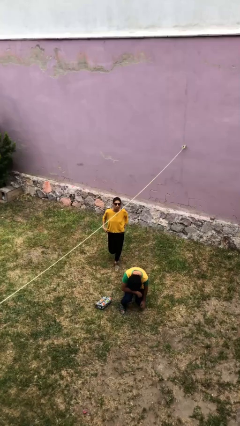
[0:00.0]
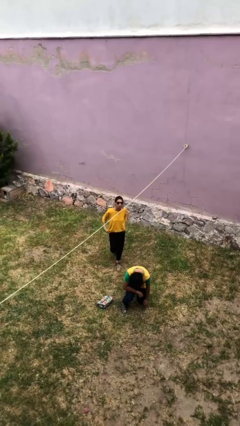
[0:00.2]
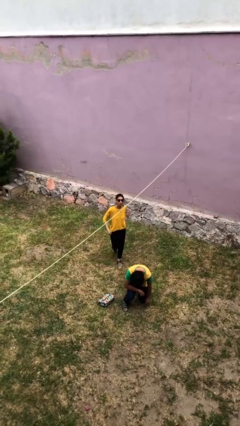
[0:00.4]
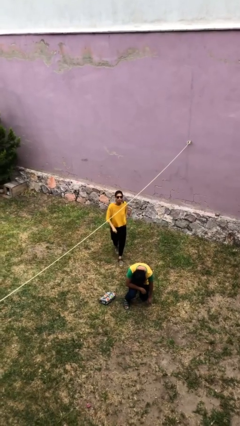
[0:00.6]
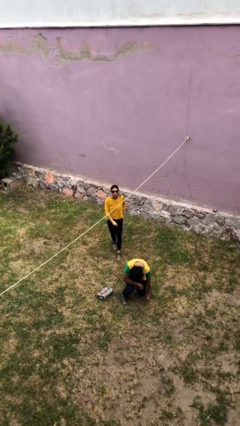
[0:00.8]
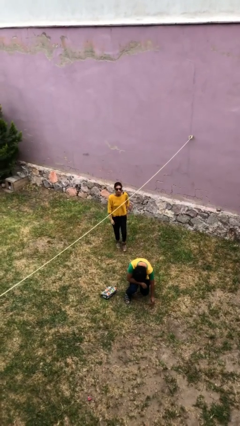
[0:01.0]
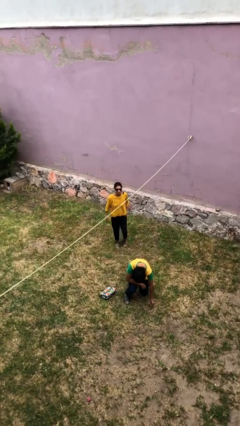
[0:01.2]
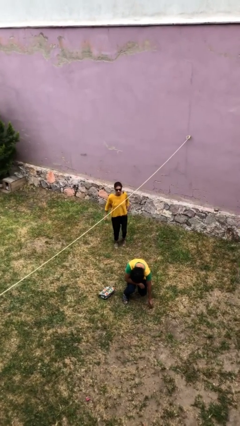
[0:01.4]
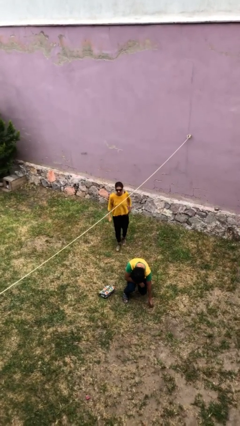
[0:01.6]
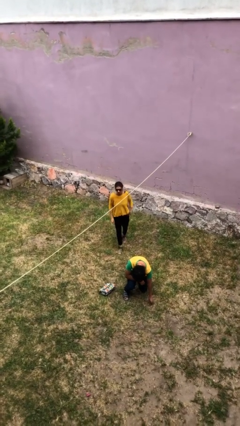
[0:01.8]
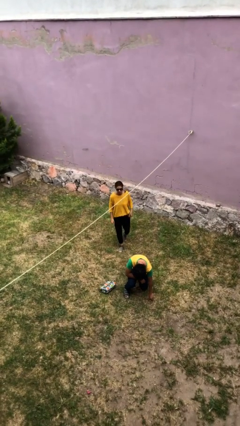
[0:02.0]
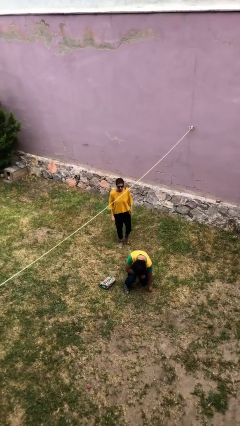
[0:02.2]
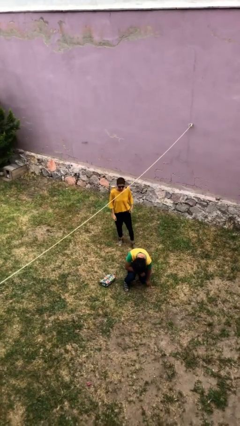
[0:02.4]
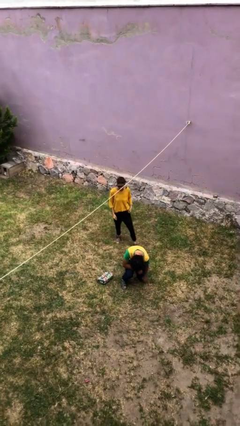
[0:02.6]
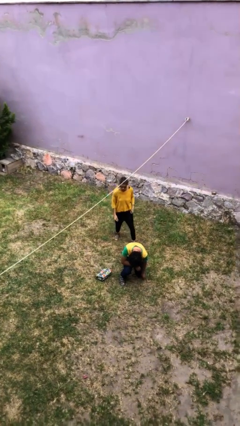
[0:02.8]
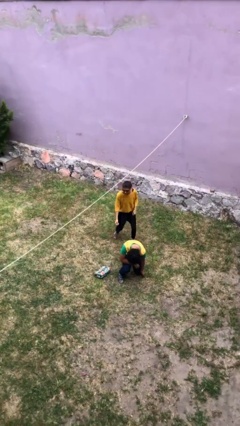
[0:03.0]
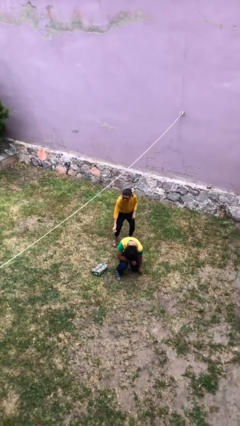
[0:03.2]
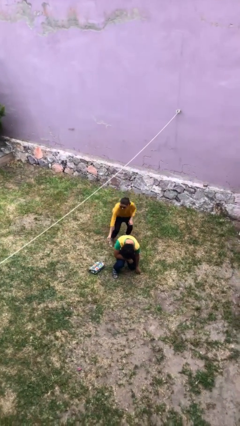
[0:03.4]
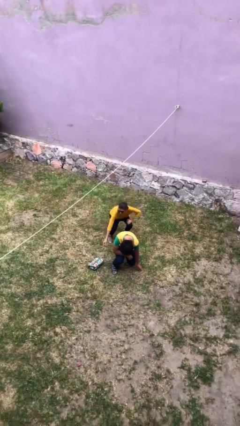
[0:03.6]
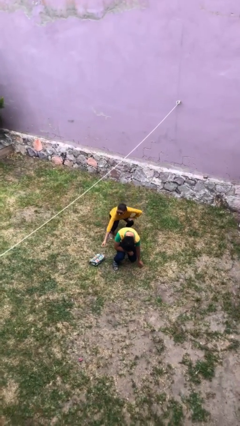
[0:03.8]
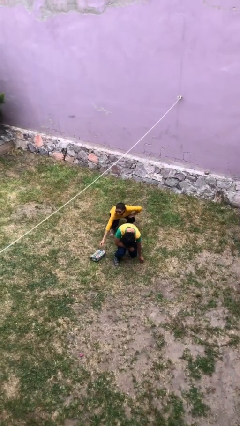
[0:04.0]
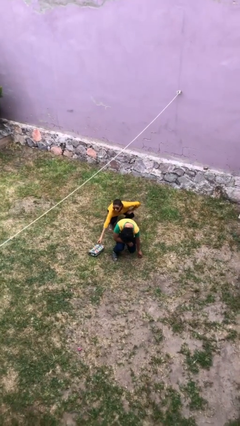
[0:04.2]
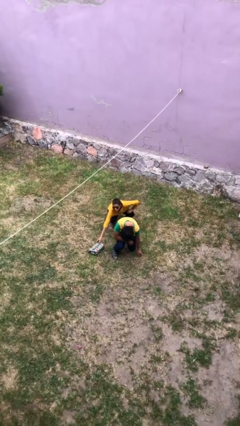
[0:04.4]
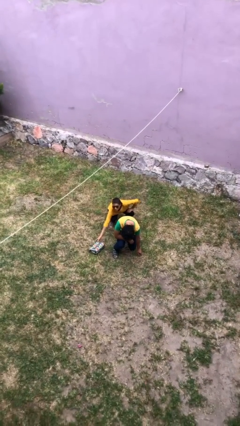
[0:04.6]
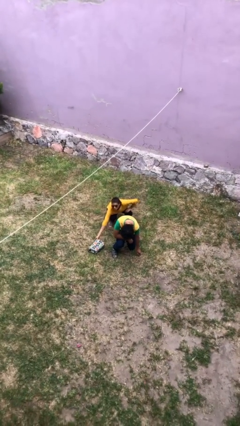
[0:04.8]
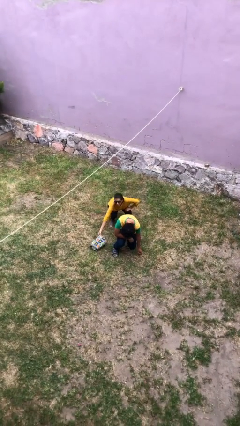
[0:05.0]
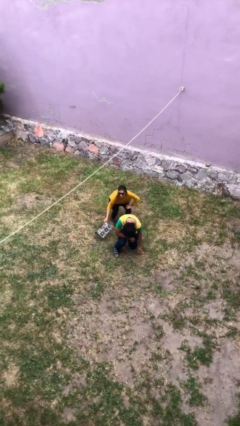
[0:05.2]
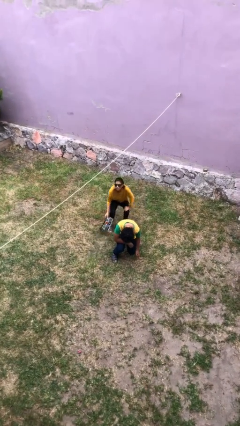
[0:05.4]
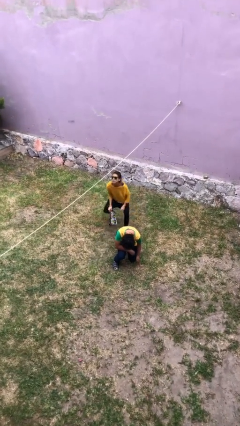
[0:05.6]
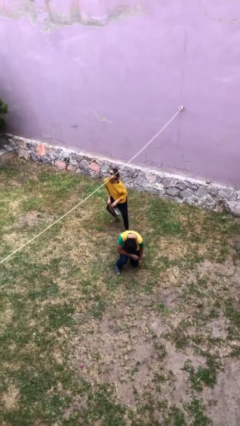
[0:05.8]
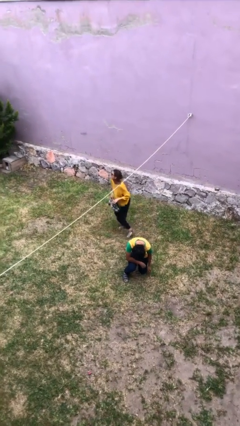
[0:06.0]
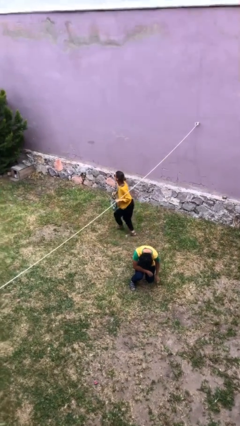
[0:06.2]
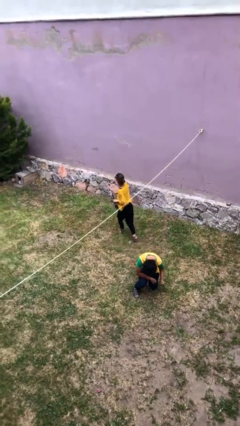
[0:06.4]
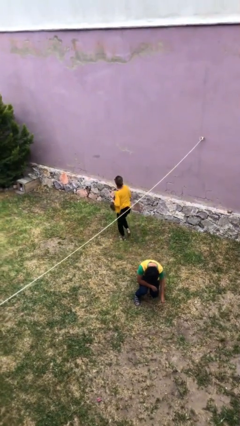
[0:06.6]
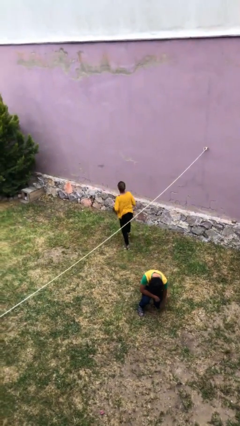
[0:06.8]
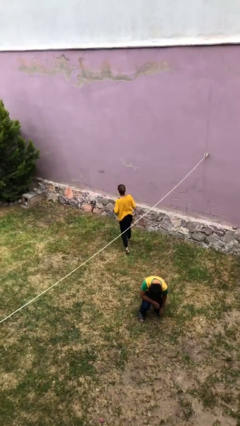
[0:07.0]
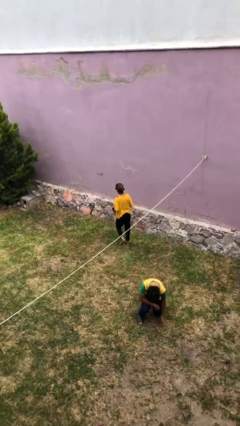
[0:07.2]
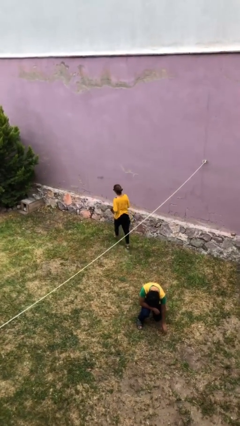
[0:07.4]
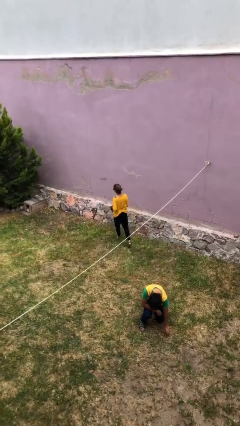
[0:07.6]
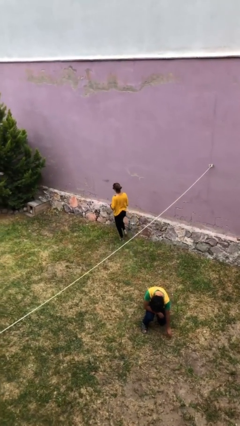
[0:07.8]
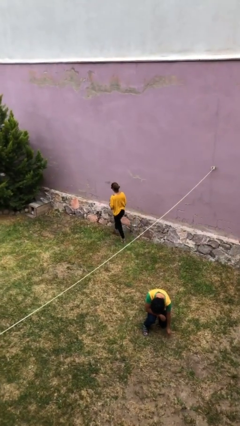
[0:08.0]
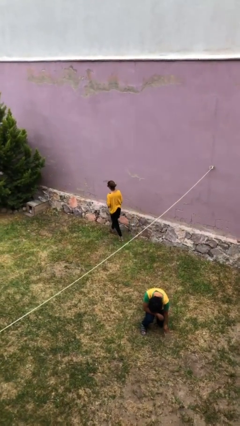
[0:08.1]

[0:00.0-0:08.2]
person steals object from person

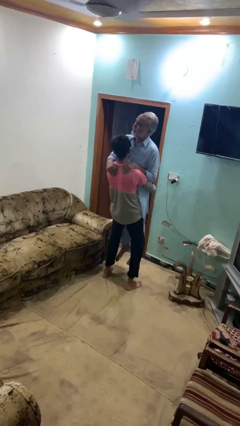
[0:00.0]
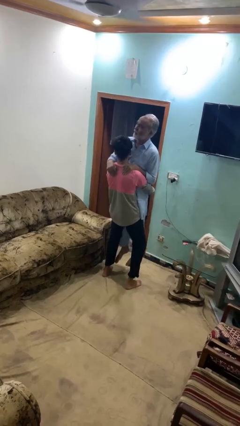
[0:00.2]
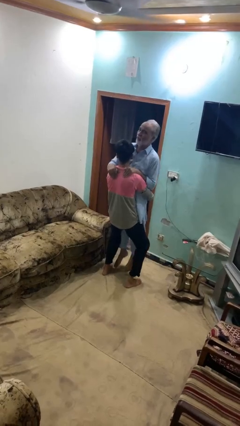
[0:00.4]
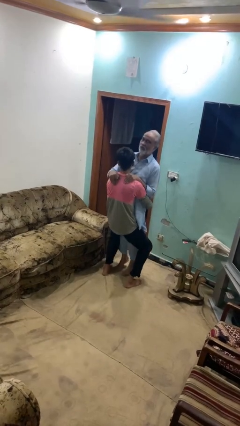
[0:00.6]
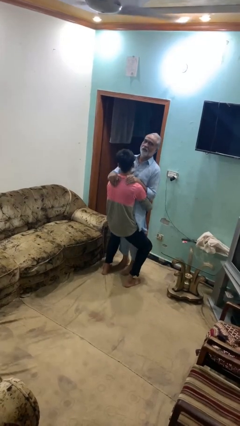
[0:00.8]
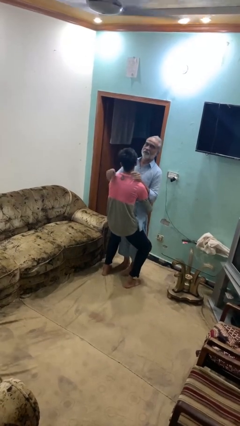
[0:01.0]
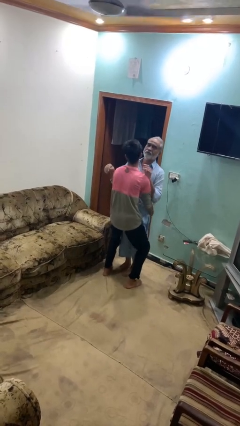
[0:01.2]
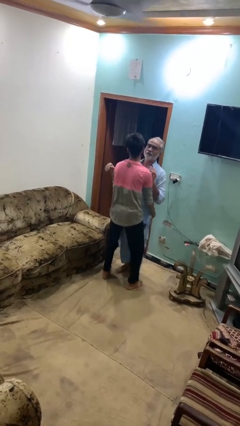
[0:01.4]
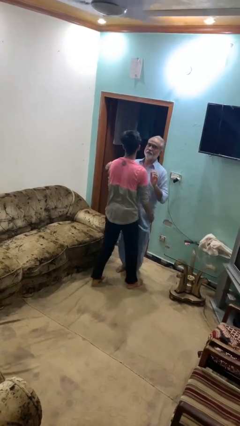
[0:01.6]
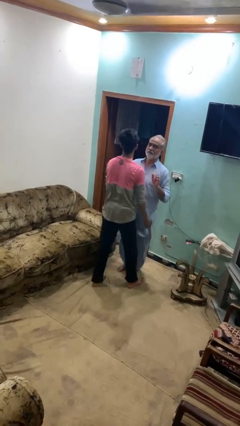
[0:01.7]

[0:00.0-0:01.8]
person puts down person

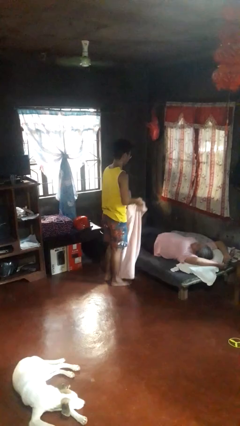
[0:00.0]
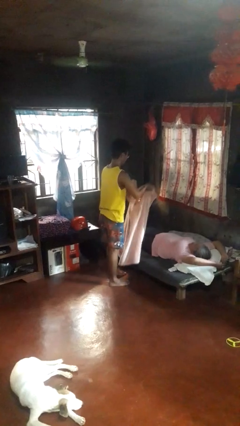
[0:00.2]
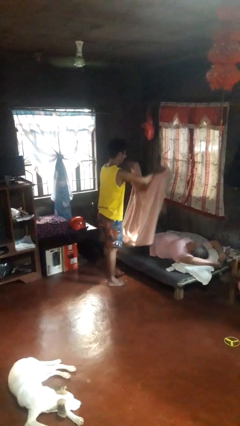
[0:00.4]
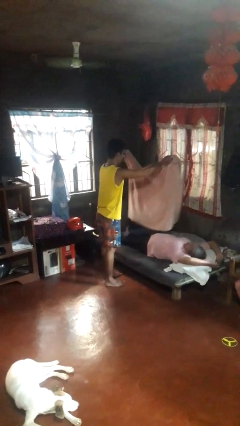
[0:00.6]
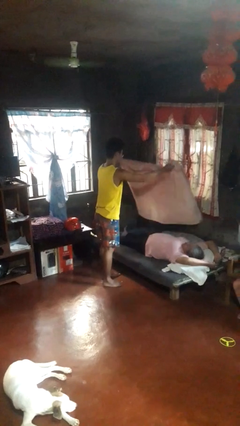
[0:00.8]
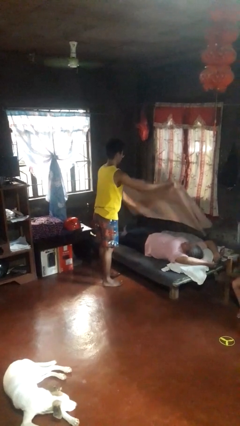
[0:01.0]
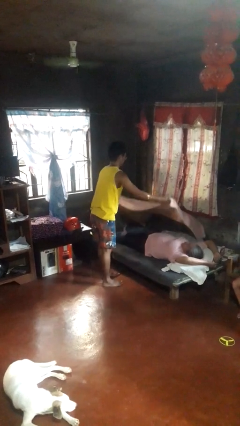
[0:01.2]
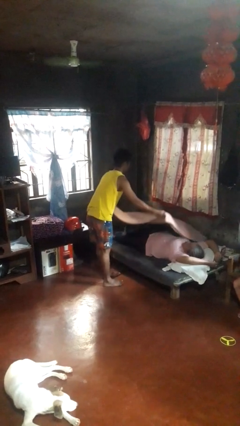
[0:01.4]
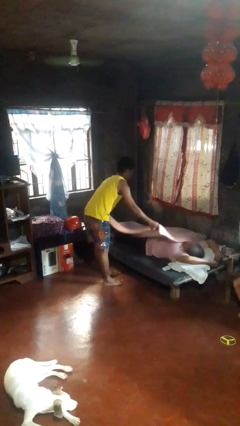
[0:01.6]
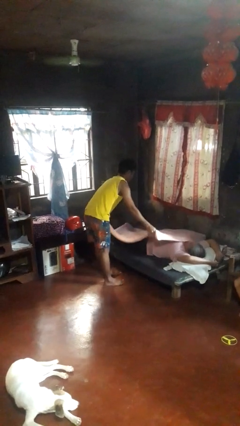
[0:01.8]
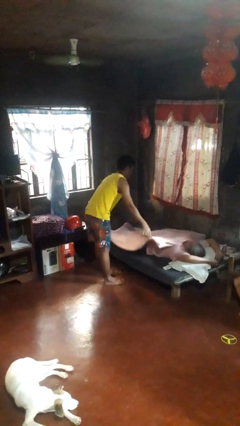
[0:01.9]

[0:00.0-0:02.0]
person covers friend with blanket

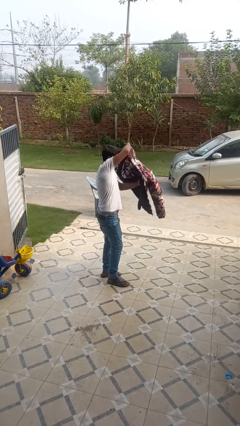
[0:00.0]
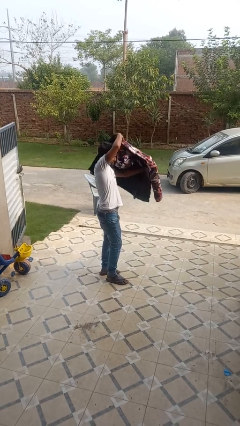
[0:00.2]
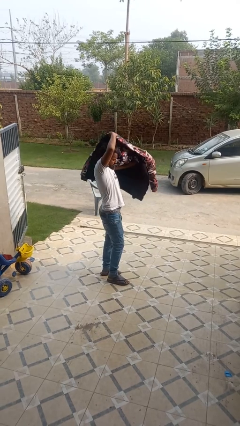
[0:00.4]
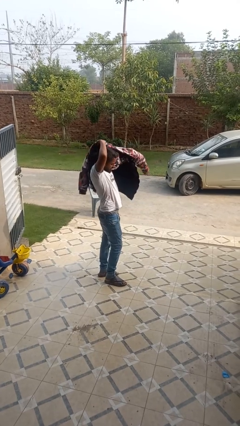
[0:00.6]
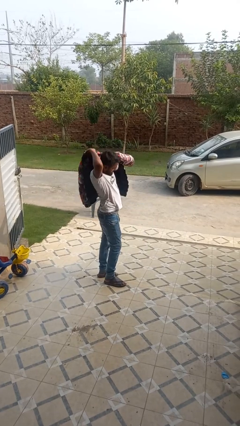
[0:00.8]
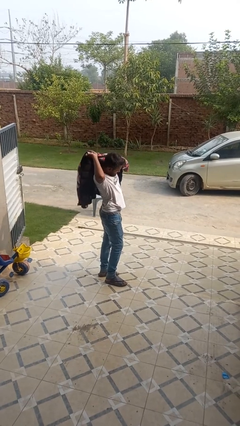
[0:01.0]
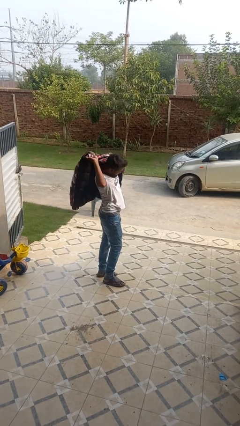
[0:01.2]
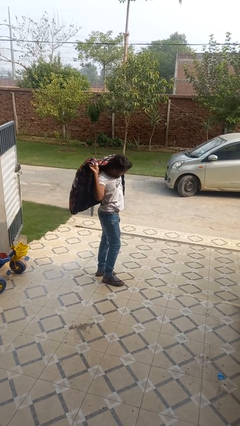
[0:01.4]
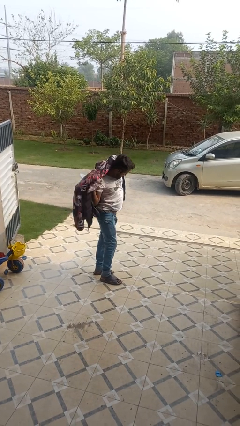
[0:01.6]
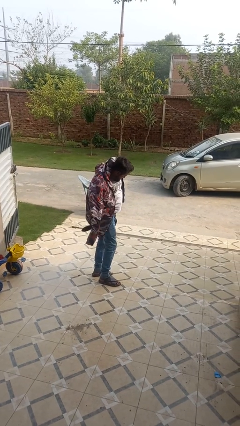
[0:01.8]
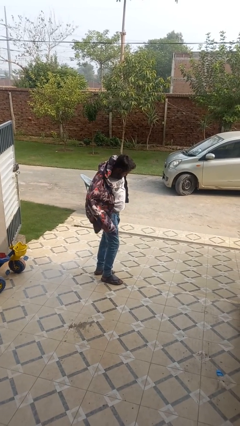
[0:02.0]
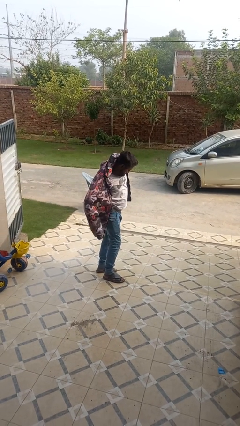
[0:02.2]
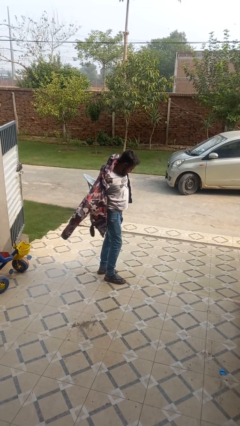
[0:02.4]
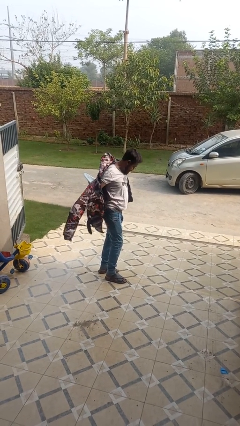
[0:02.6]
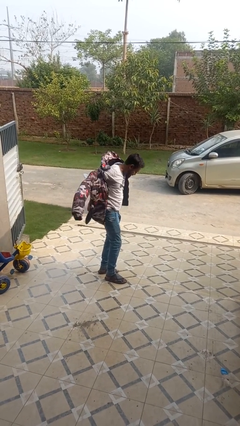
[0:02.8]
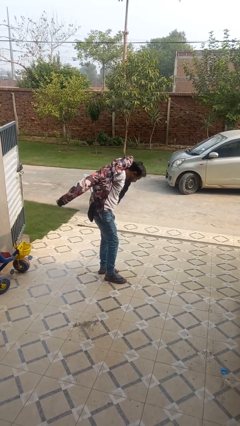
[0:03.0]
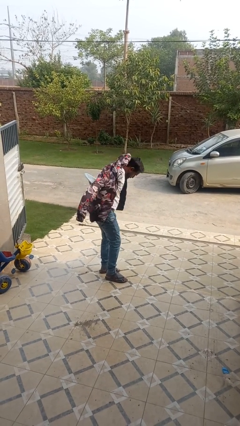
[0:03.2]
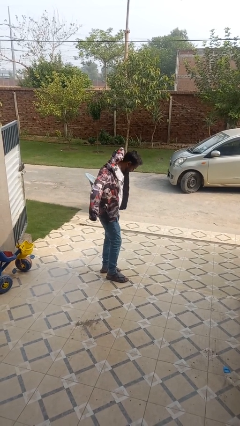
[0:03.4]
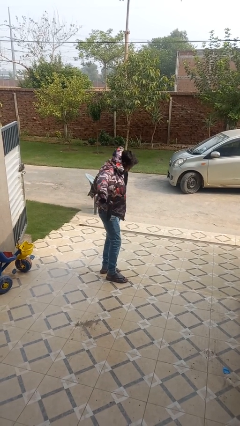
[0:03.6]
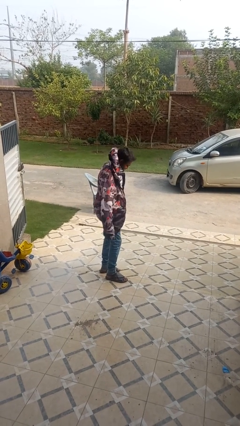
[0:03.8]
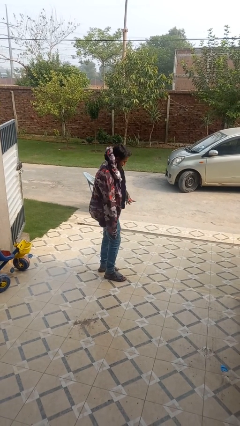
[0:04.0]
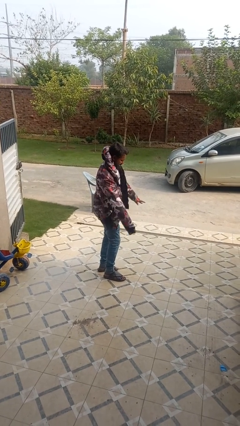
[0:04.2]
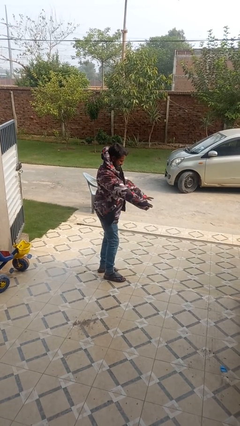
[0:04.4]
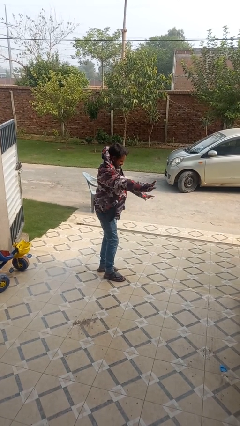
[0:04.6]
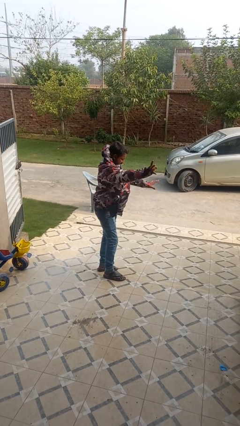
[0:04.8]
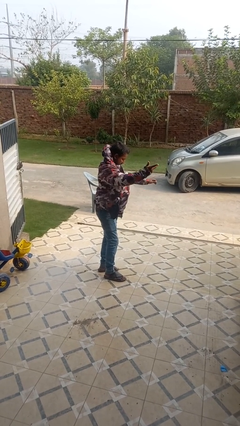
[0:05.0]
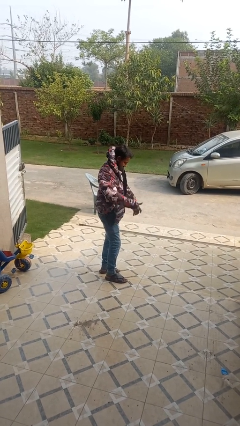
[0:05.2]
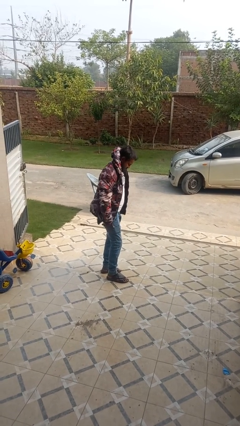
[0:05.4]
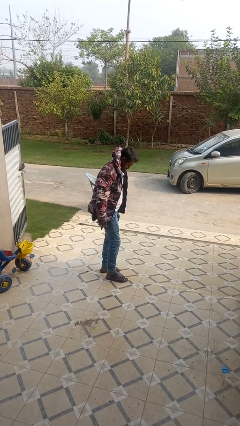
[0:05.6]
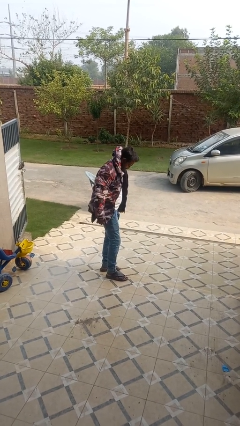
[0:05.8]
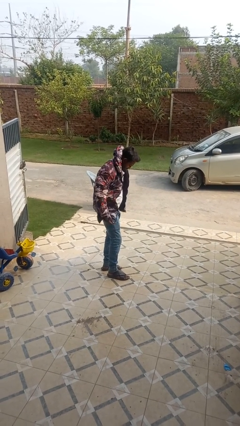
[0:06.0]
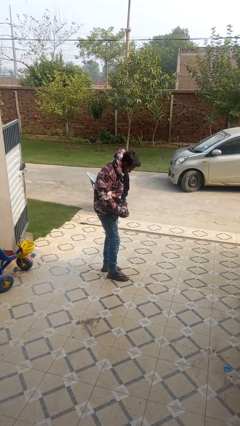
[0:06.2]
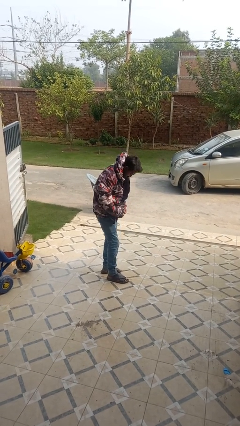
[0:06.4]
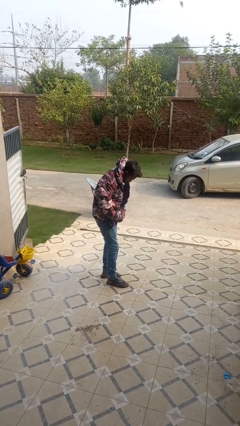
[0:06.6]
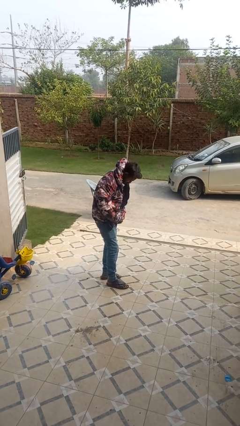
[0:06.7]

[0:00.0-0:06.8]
person puts on jacket
